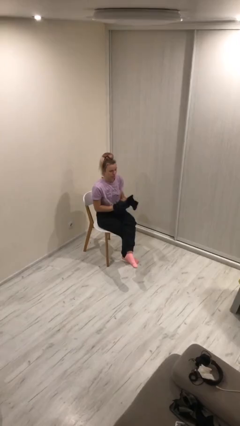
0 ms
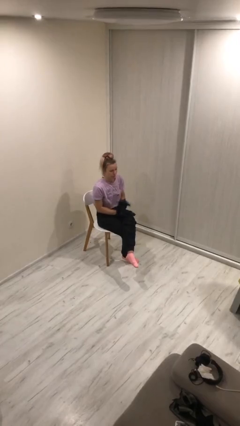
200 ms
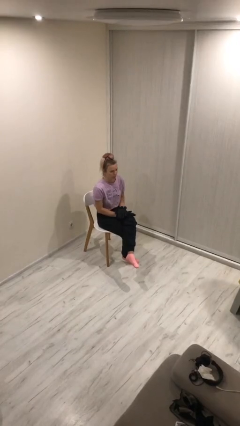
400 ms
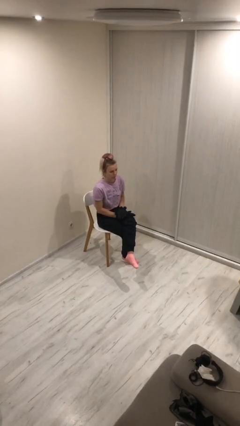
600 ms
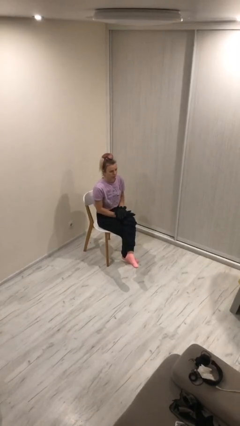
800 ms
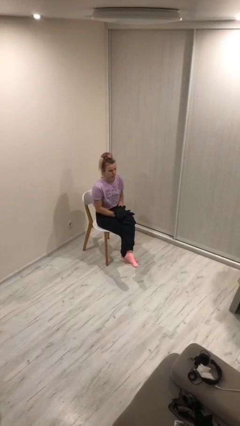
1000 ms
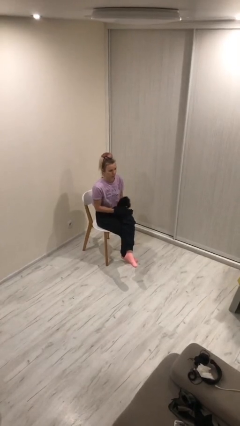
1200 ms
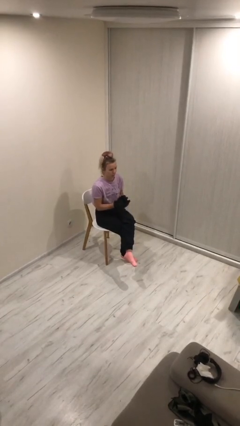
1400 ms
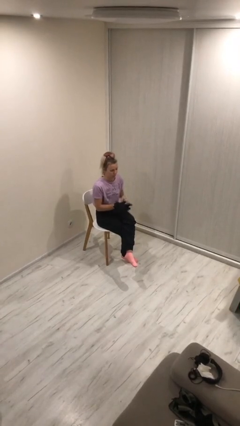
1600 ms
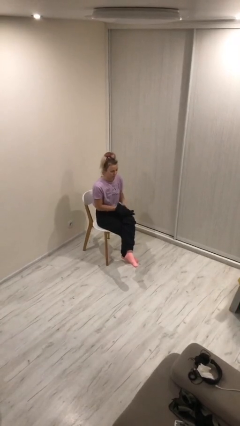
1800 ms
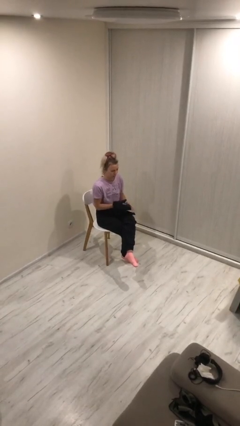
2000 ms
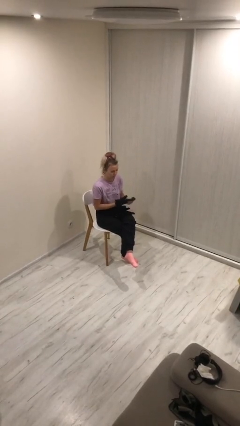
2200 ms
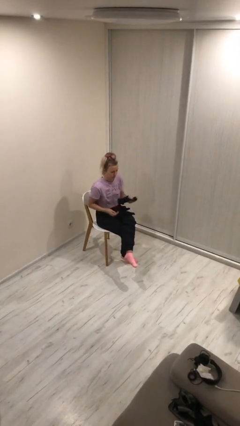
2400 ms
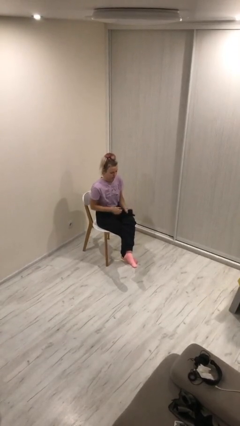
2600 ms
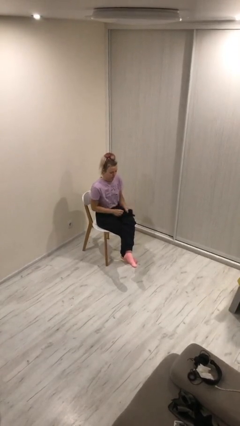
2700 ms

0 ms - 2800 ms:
person takes off gloves

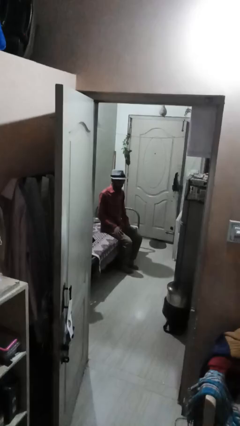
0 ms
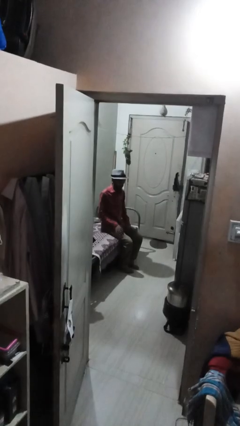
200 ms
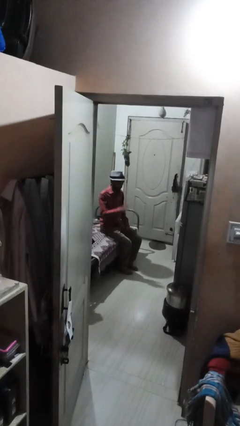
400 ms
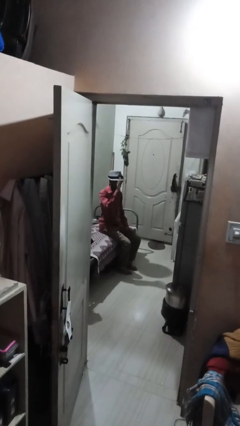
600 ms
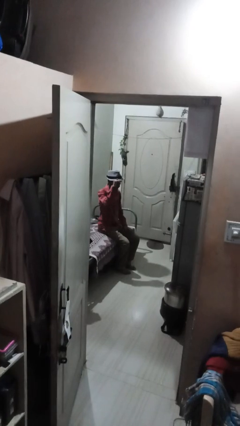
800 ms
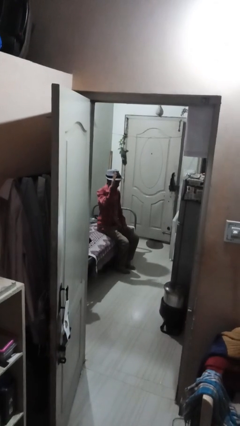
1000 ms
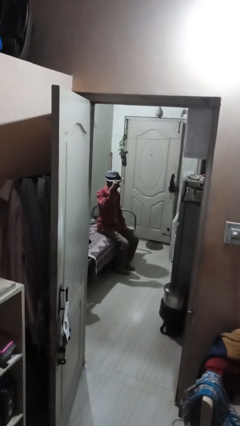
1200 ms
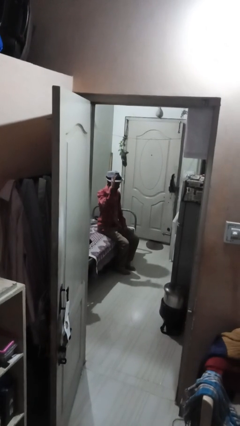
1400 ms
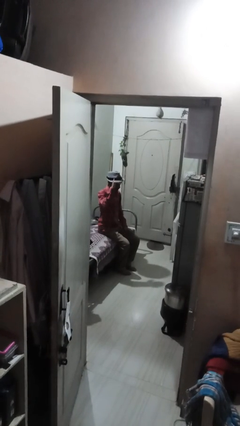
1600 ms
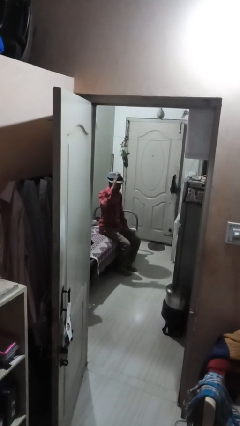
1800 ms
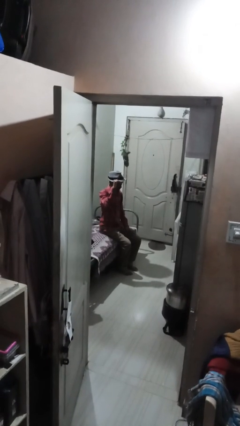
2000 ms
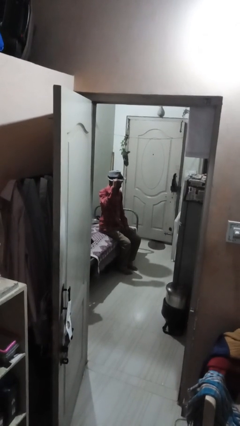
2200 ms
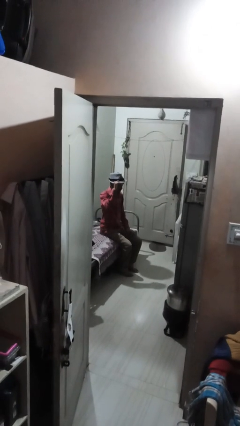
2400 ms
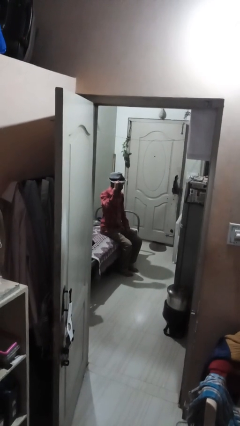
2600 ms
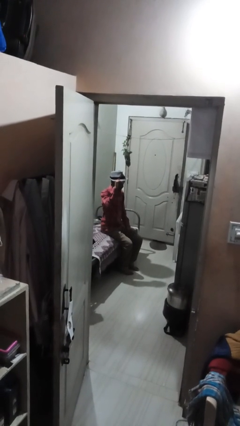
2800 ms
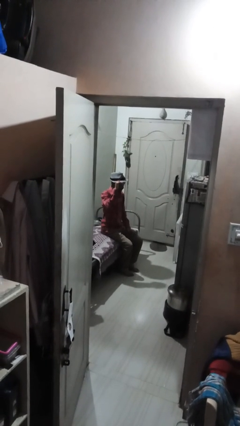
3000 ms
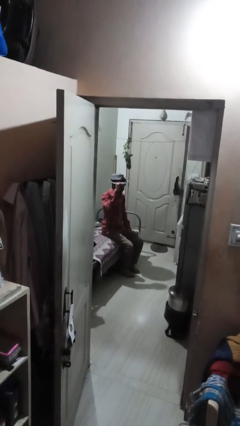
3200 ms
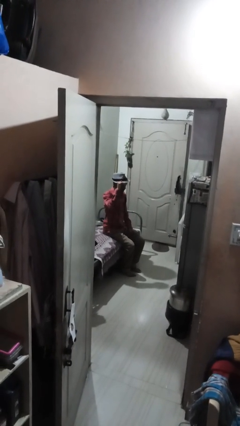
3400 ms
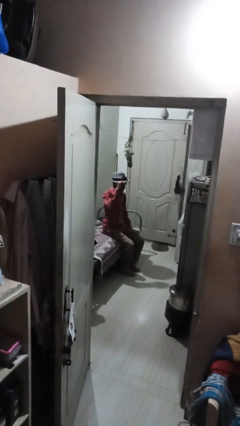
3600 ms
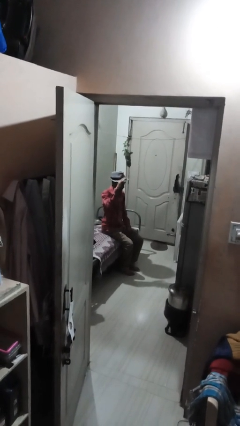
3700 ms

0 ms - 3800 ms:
person gestures come here

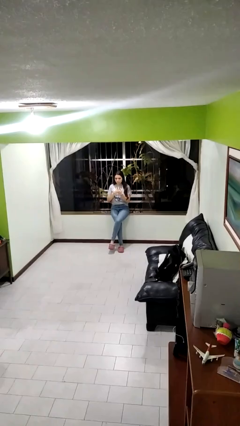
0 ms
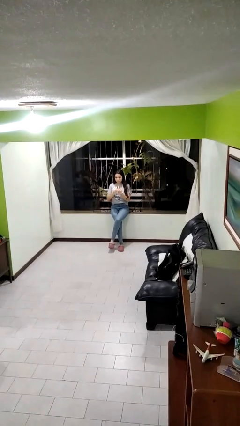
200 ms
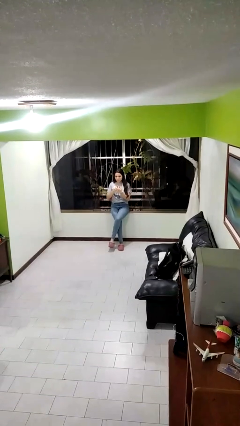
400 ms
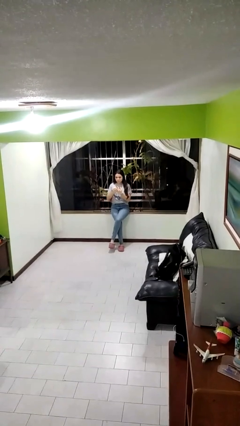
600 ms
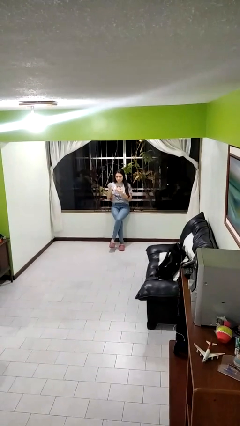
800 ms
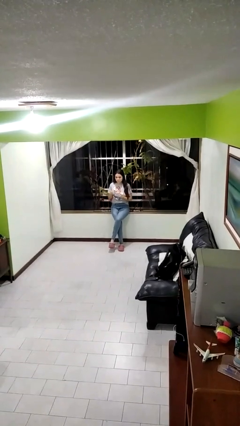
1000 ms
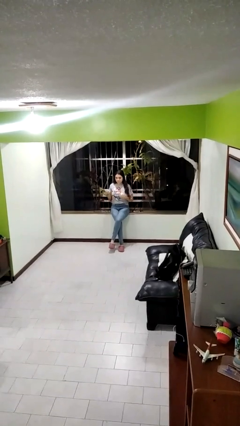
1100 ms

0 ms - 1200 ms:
person takes off ring

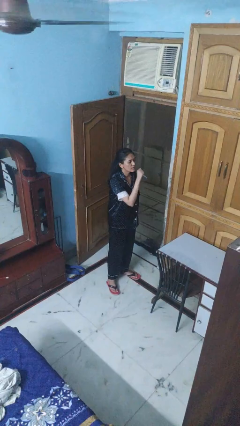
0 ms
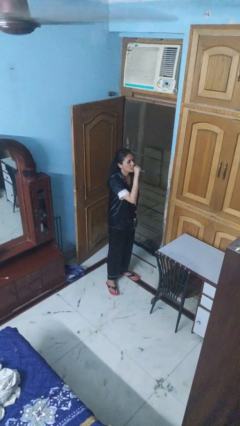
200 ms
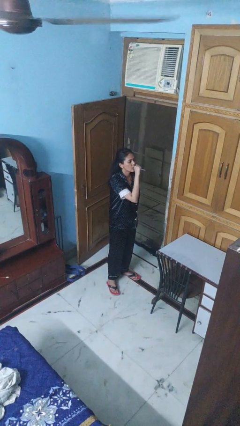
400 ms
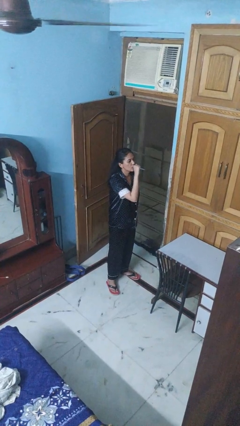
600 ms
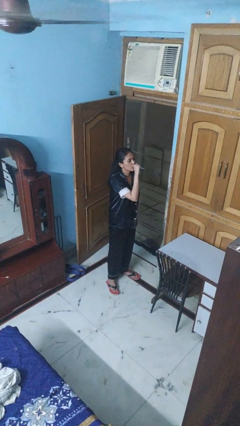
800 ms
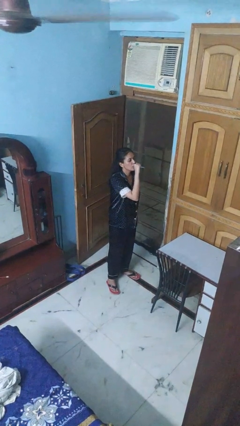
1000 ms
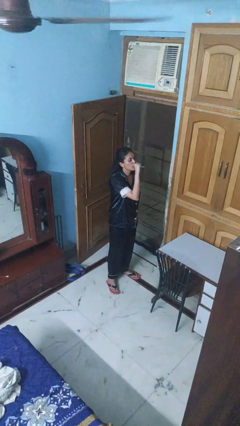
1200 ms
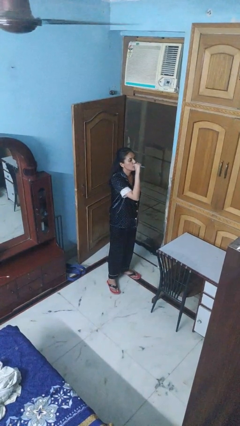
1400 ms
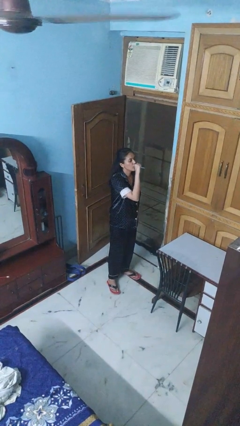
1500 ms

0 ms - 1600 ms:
person vapes

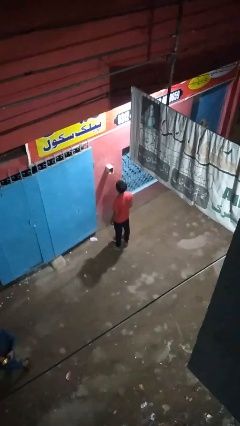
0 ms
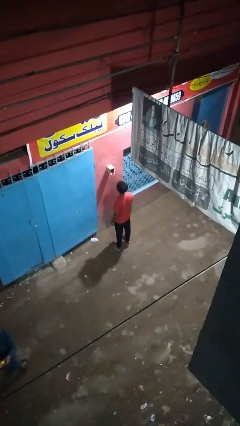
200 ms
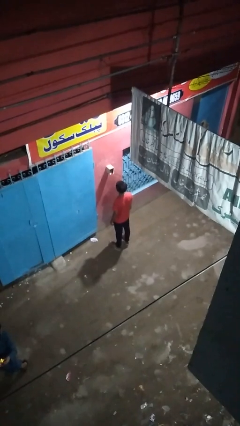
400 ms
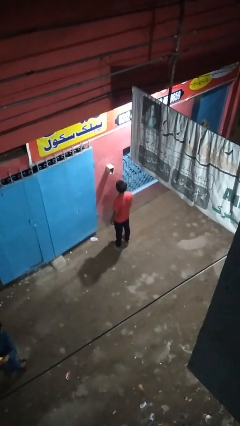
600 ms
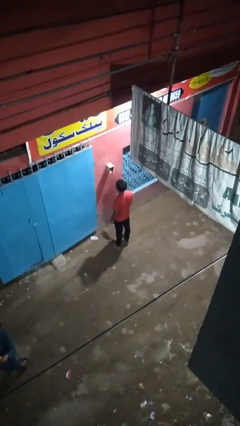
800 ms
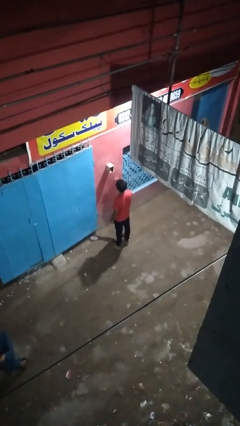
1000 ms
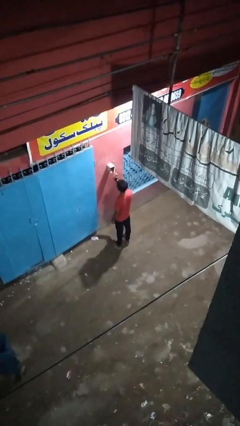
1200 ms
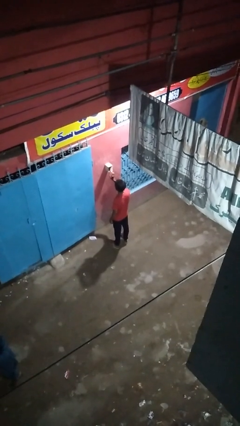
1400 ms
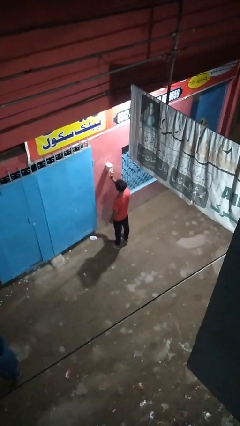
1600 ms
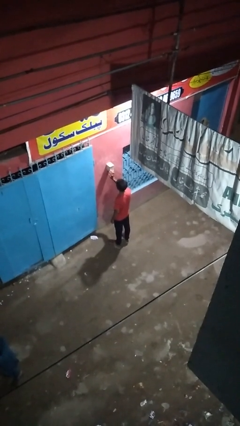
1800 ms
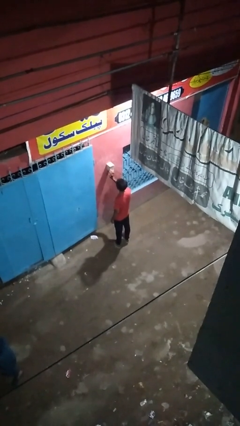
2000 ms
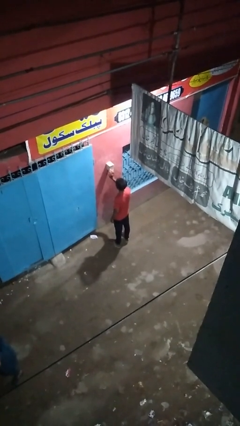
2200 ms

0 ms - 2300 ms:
person closes mailbox

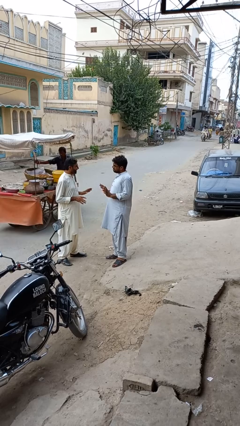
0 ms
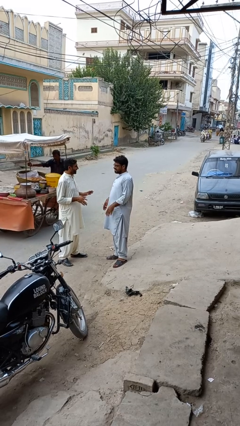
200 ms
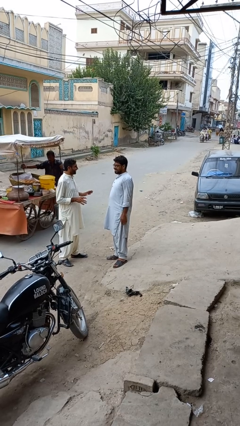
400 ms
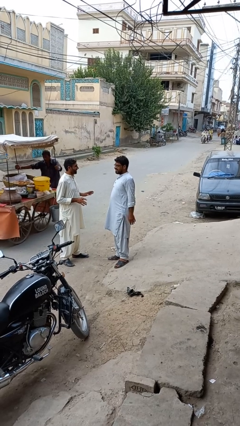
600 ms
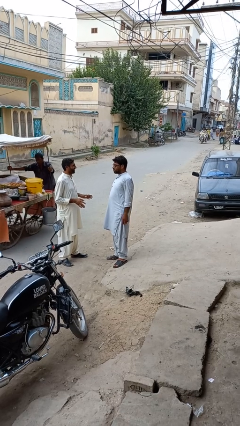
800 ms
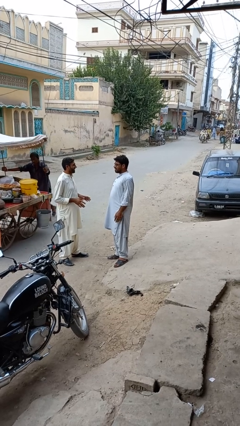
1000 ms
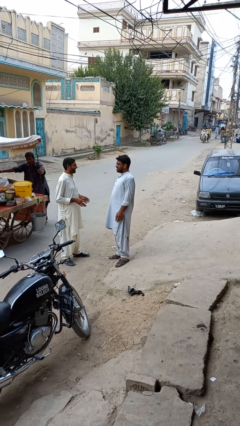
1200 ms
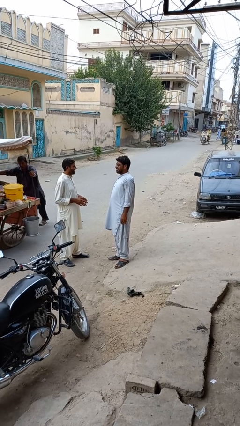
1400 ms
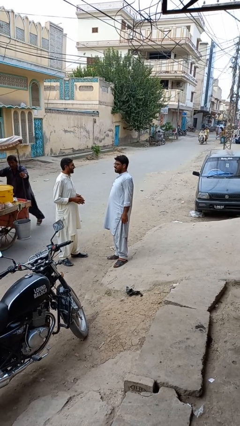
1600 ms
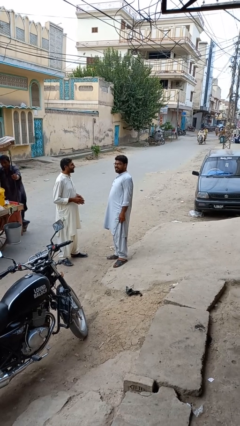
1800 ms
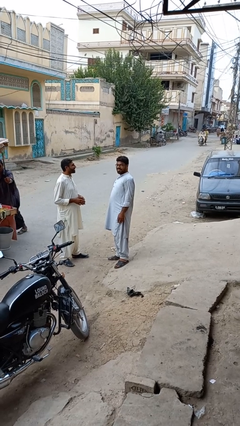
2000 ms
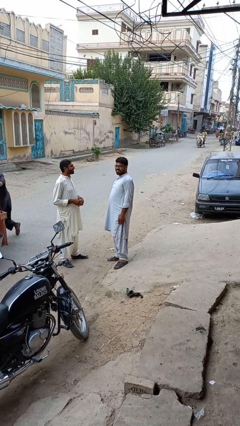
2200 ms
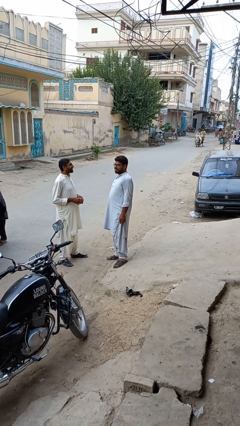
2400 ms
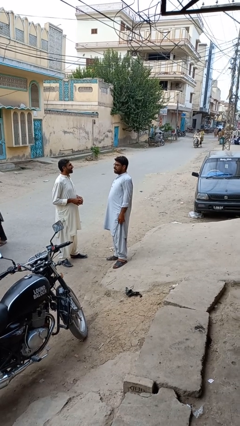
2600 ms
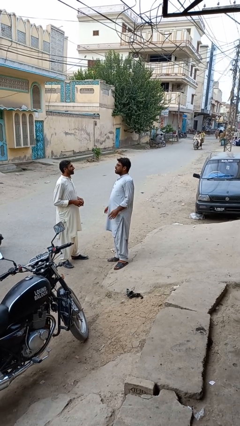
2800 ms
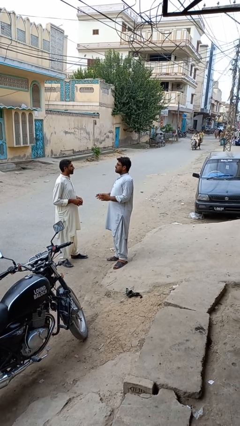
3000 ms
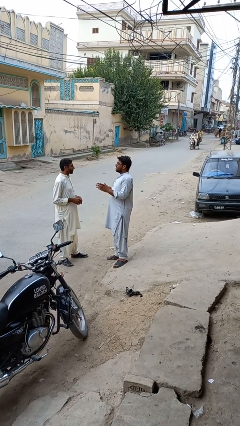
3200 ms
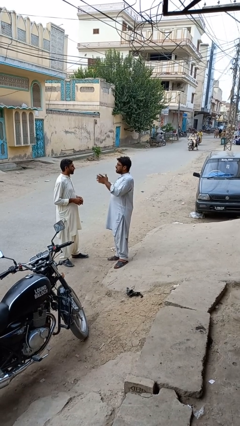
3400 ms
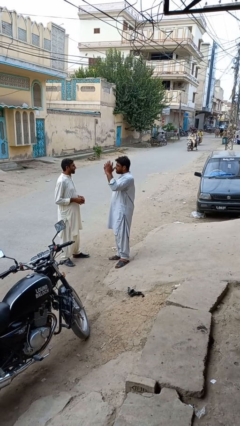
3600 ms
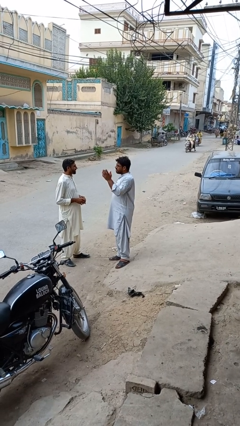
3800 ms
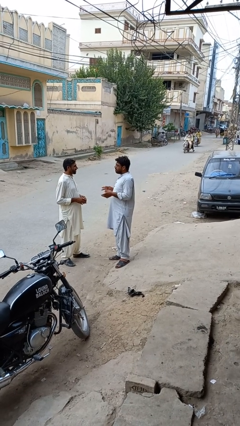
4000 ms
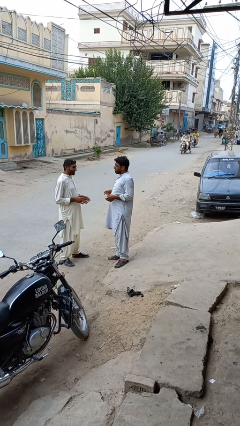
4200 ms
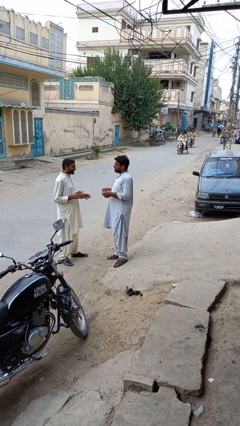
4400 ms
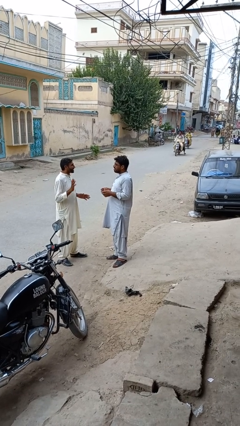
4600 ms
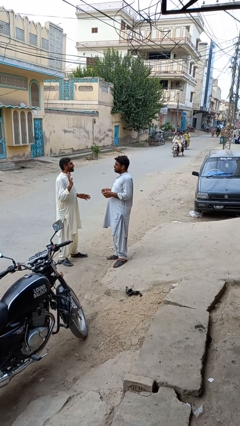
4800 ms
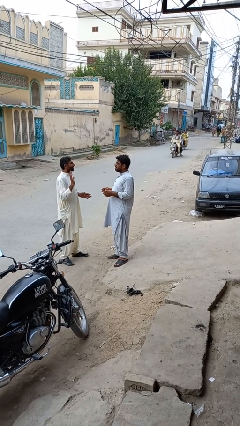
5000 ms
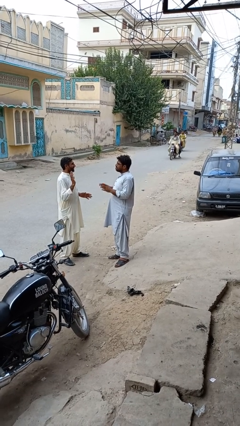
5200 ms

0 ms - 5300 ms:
person talks to person

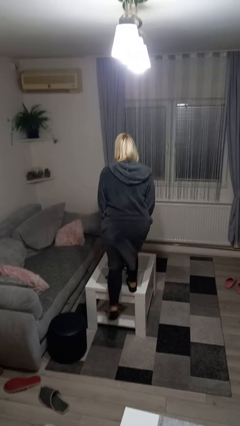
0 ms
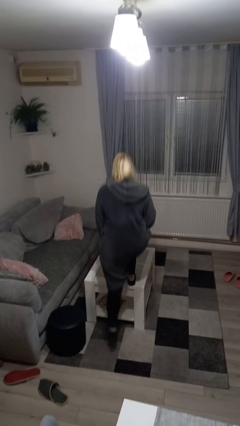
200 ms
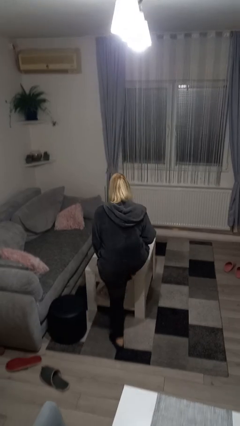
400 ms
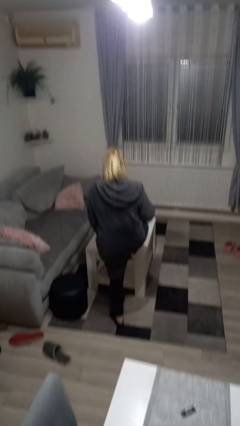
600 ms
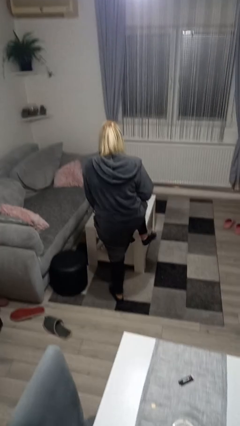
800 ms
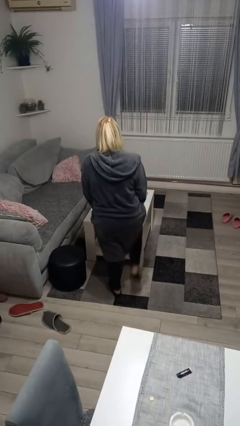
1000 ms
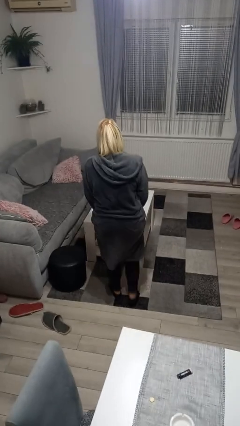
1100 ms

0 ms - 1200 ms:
person climbs off table
